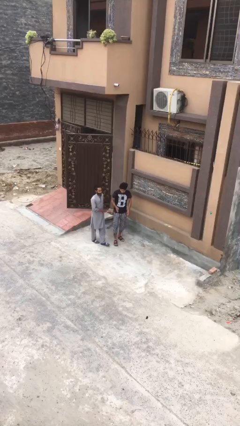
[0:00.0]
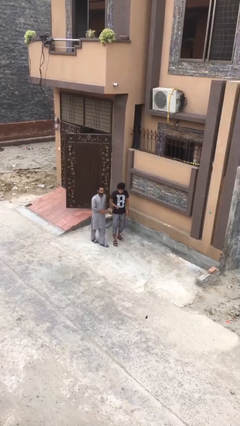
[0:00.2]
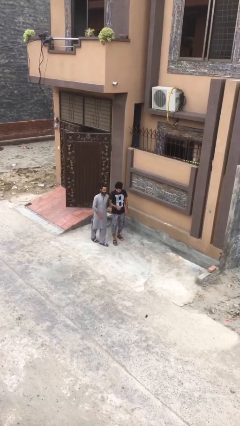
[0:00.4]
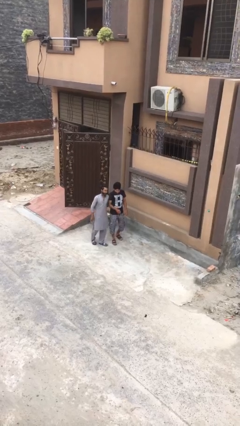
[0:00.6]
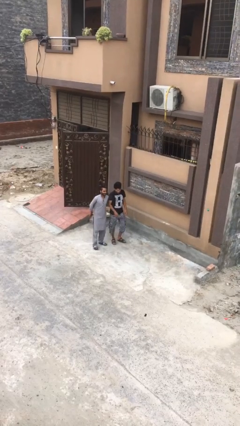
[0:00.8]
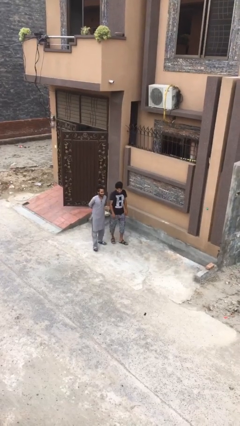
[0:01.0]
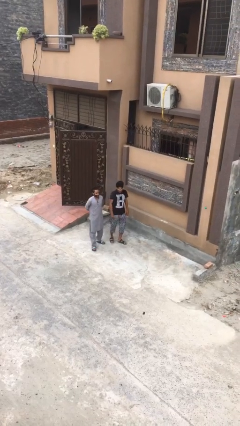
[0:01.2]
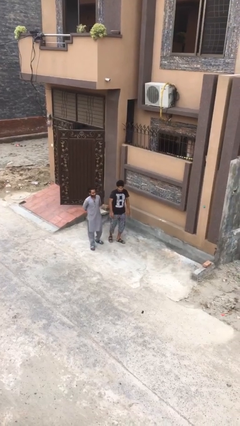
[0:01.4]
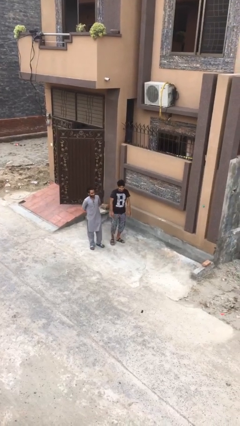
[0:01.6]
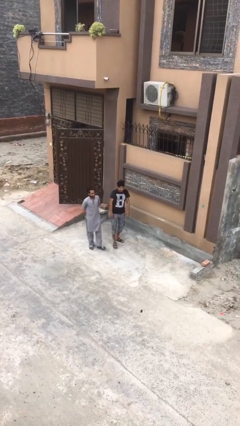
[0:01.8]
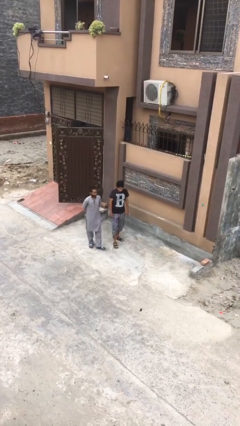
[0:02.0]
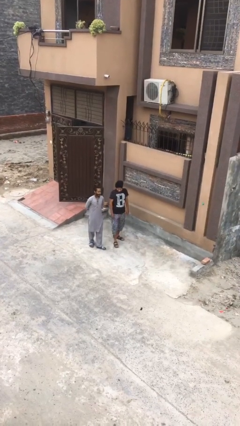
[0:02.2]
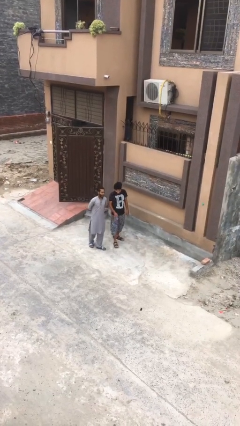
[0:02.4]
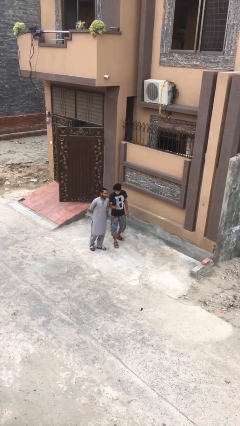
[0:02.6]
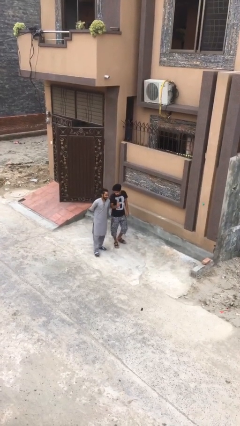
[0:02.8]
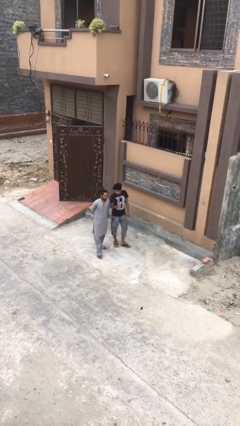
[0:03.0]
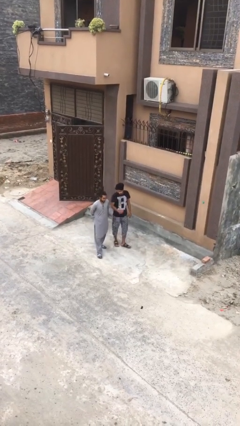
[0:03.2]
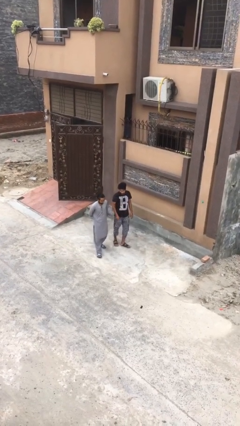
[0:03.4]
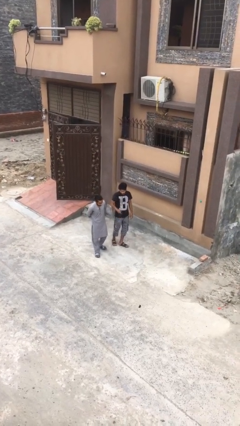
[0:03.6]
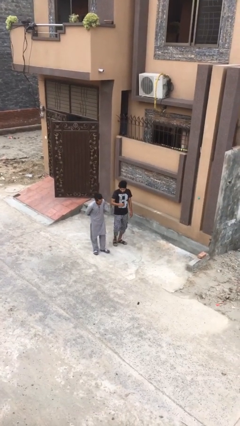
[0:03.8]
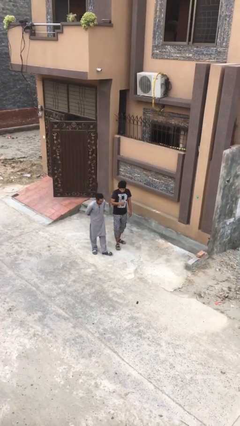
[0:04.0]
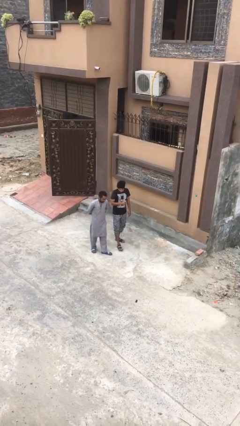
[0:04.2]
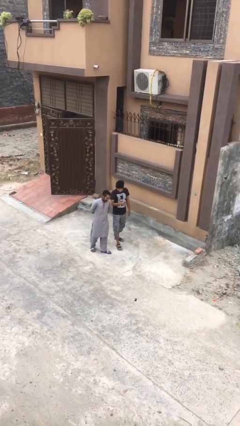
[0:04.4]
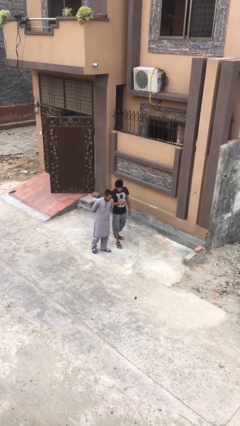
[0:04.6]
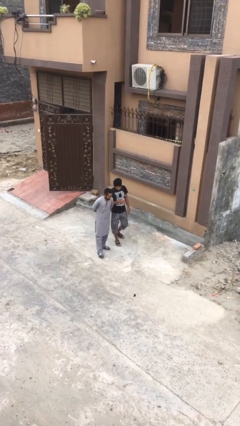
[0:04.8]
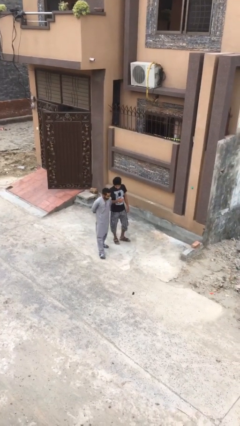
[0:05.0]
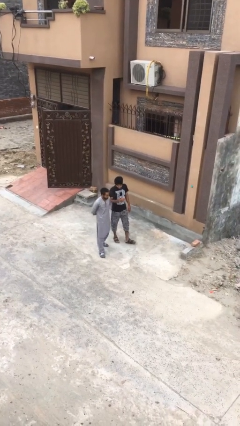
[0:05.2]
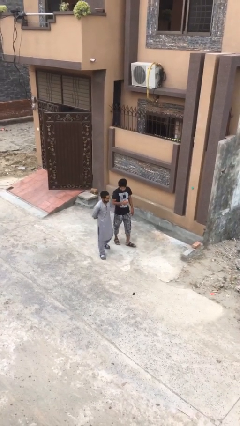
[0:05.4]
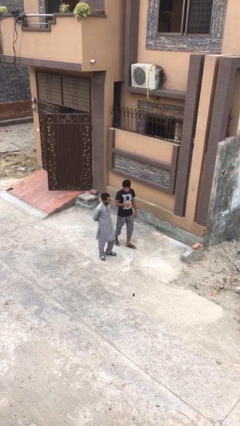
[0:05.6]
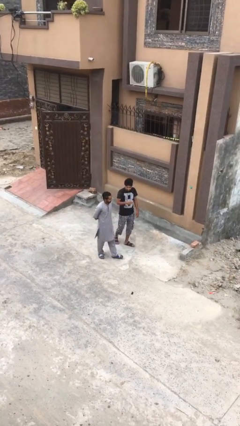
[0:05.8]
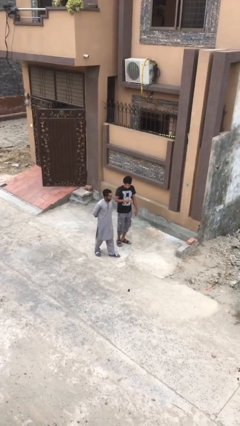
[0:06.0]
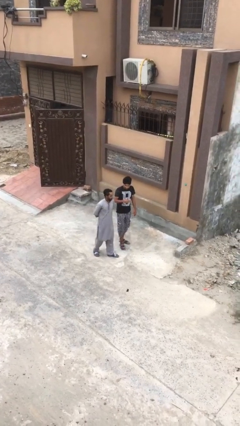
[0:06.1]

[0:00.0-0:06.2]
person talks to person

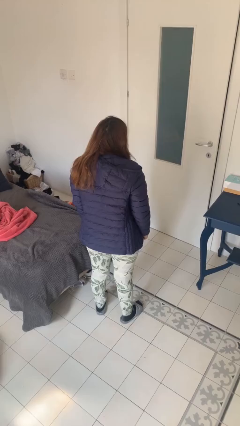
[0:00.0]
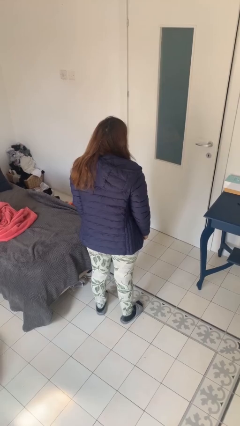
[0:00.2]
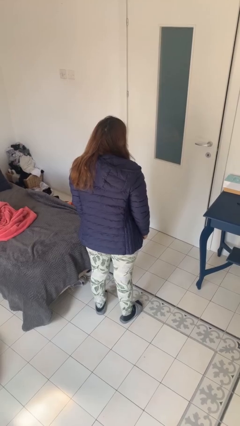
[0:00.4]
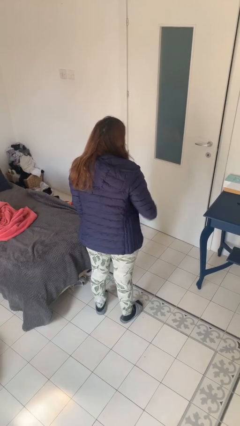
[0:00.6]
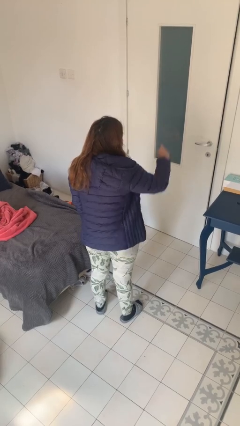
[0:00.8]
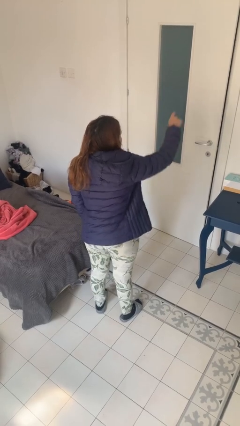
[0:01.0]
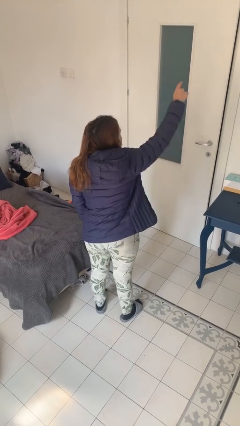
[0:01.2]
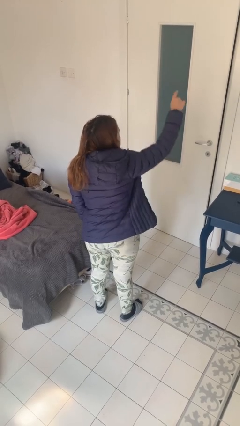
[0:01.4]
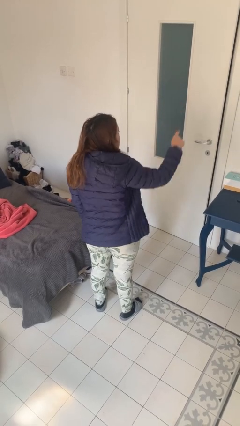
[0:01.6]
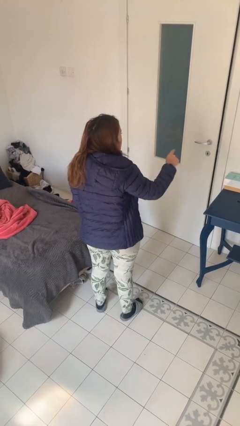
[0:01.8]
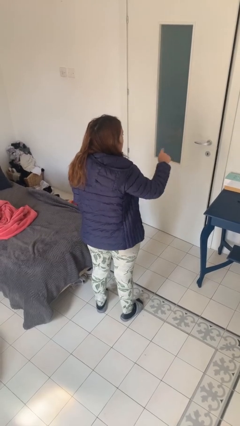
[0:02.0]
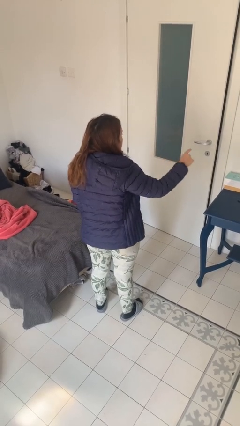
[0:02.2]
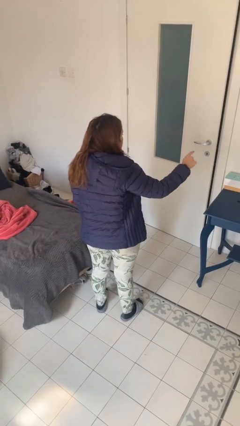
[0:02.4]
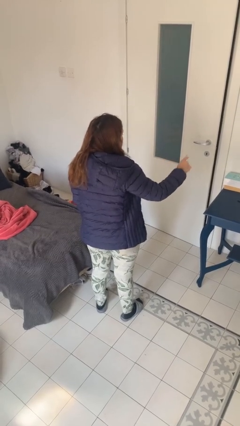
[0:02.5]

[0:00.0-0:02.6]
person gestures number one

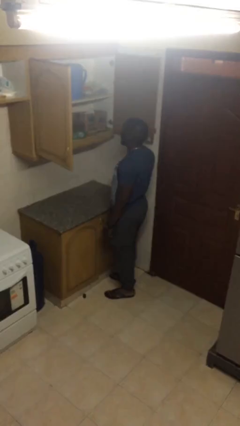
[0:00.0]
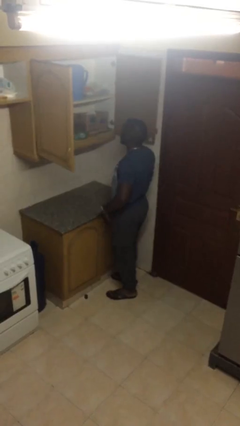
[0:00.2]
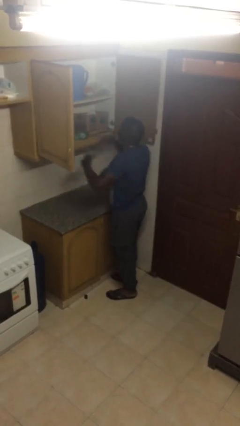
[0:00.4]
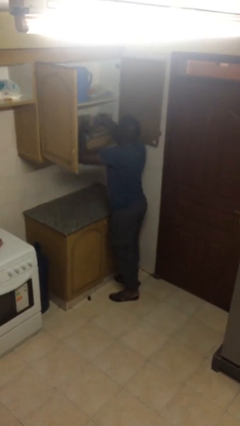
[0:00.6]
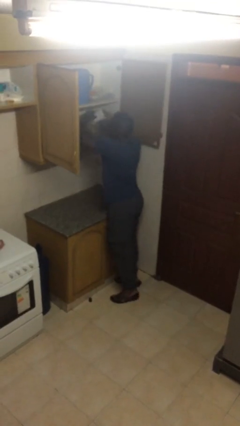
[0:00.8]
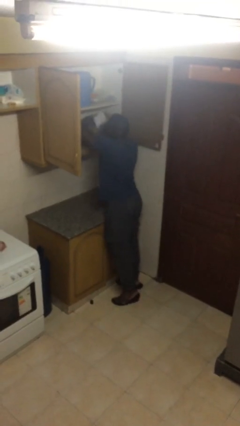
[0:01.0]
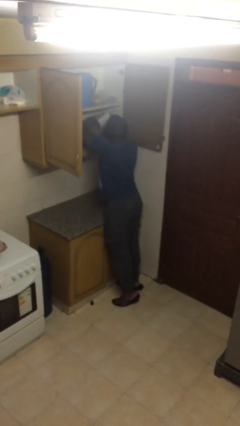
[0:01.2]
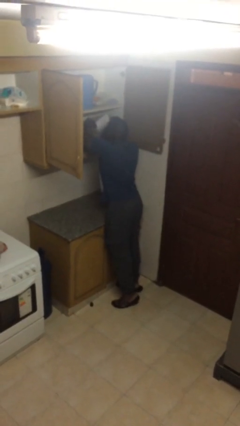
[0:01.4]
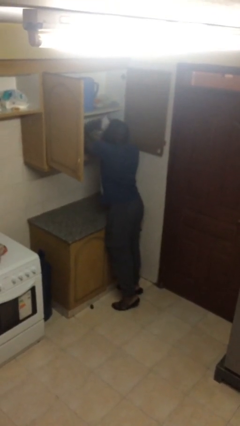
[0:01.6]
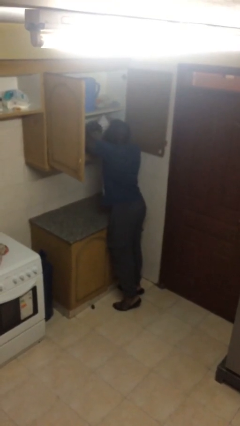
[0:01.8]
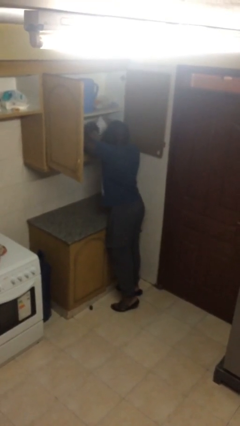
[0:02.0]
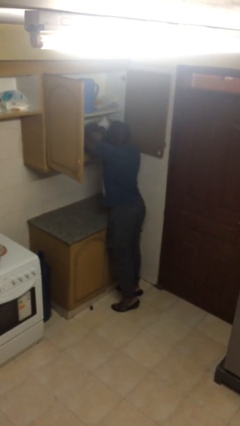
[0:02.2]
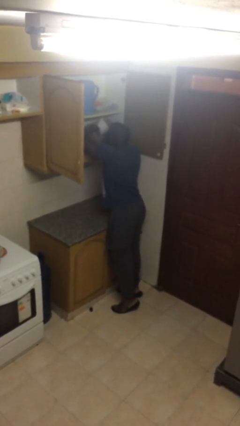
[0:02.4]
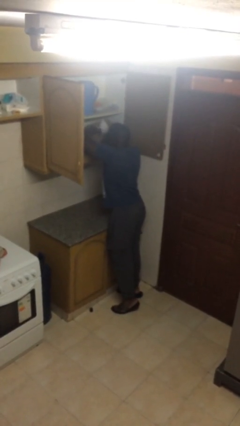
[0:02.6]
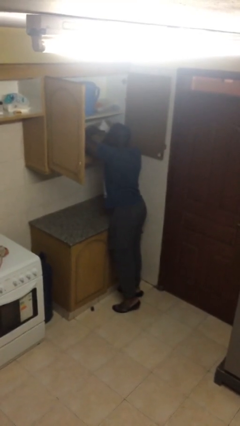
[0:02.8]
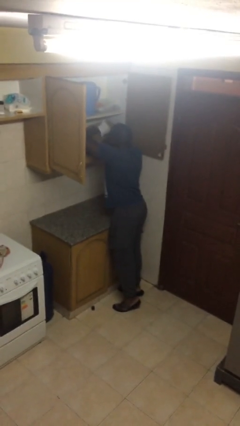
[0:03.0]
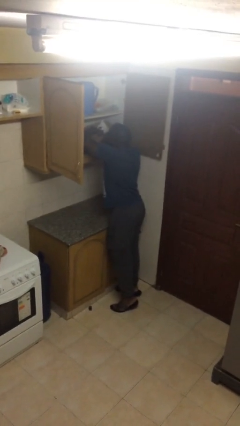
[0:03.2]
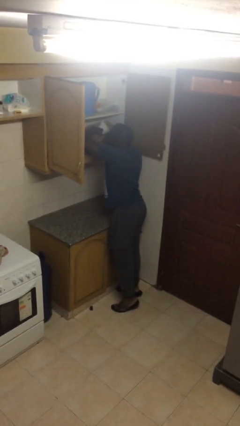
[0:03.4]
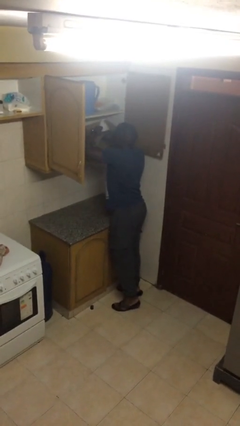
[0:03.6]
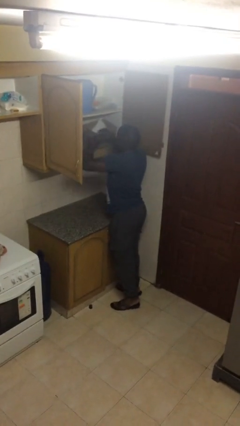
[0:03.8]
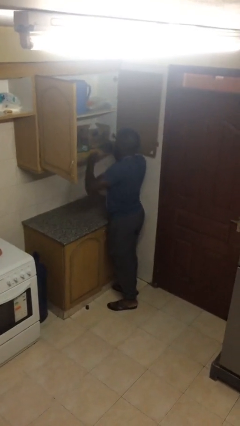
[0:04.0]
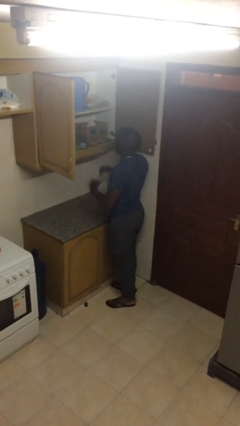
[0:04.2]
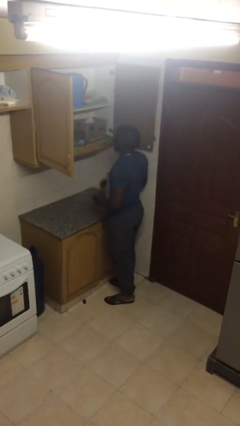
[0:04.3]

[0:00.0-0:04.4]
person searches in cabinet

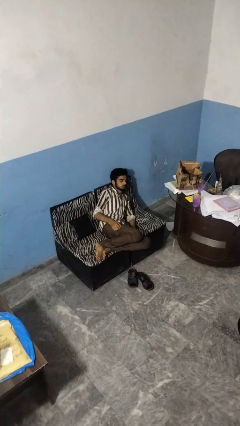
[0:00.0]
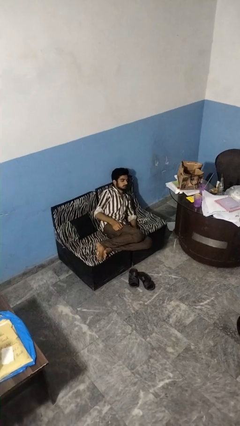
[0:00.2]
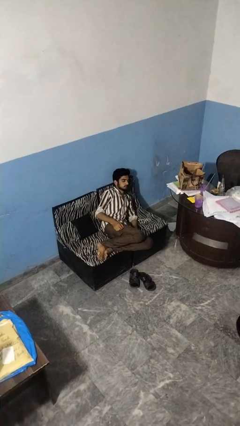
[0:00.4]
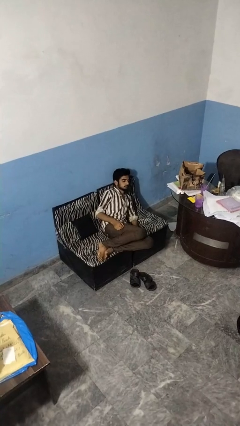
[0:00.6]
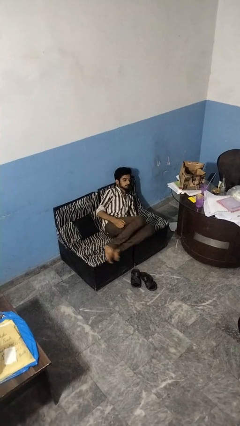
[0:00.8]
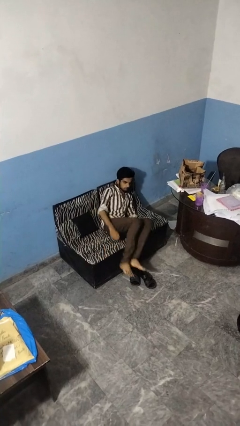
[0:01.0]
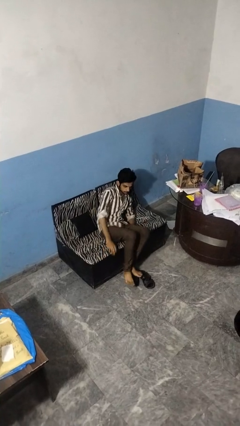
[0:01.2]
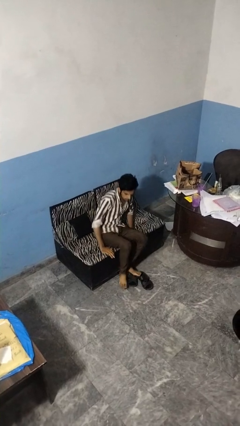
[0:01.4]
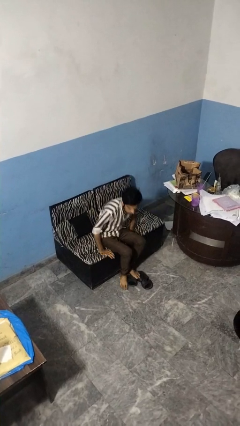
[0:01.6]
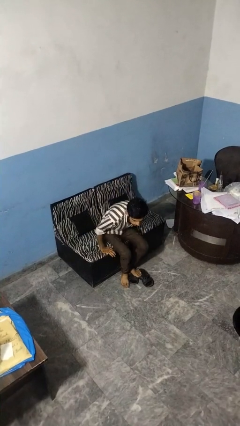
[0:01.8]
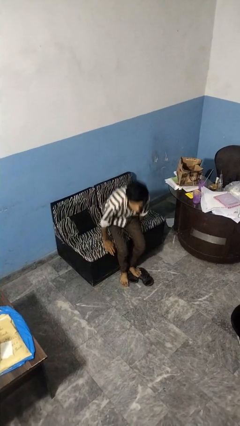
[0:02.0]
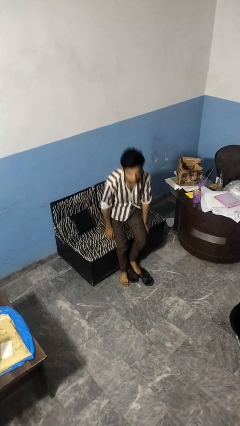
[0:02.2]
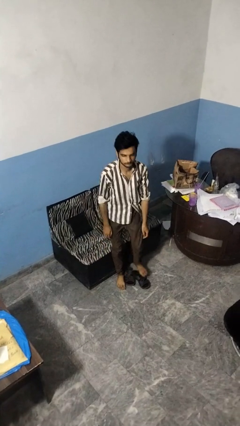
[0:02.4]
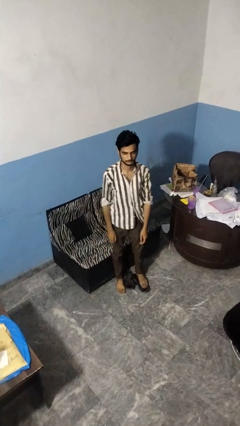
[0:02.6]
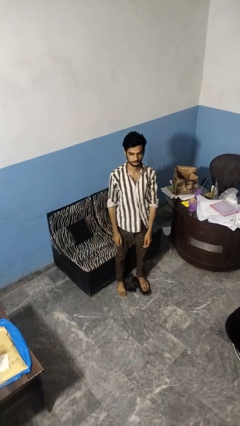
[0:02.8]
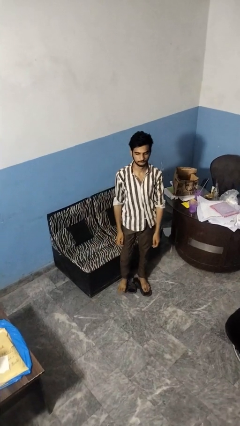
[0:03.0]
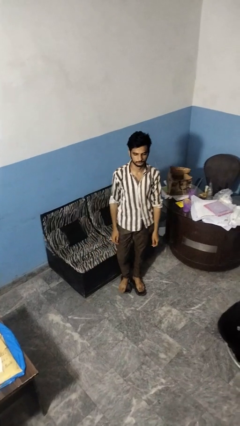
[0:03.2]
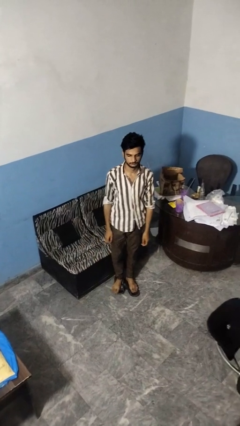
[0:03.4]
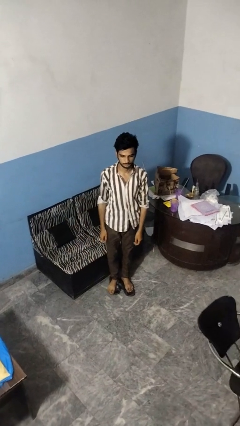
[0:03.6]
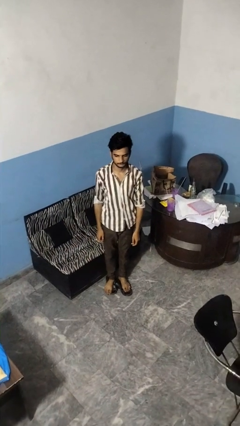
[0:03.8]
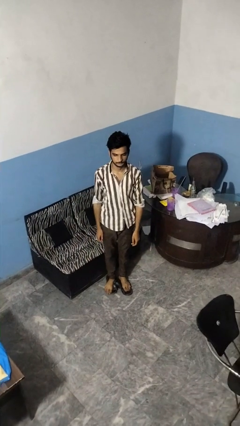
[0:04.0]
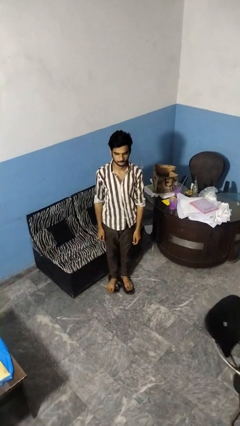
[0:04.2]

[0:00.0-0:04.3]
person stands up

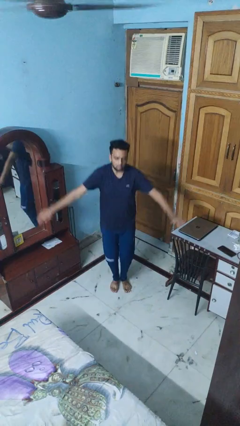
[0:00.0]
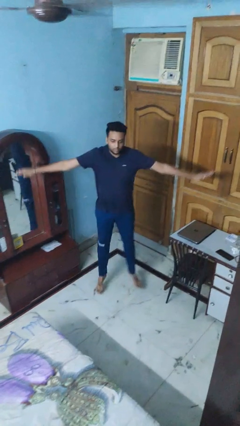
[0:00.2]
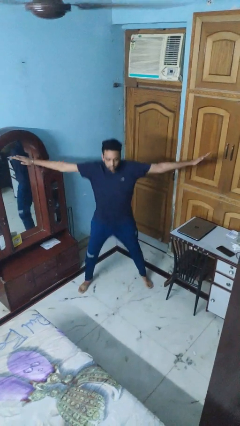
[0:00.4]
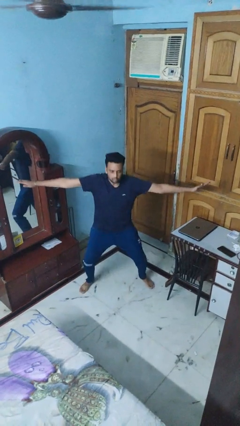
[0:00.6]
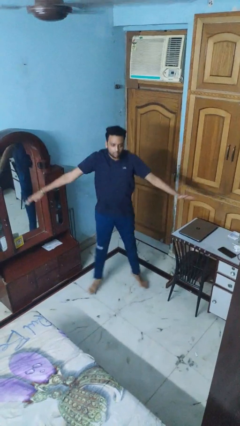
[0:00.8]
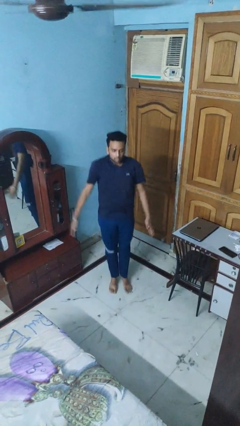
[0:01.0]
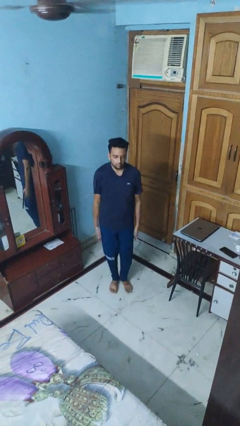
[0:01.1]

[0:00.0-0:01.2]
person exercises with jumping jacks
